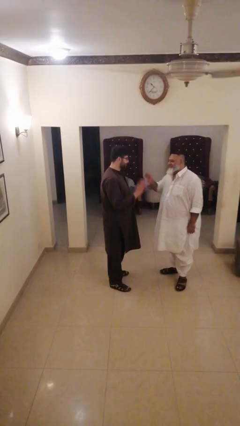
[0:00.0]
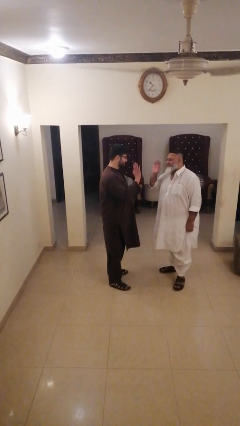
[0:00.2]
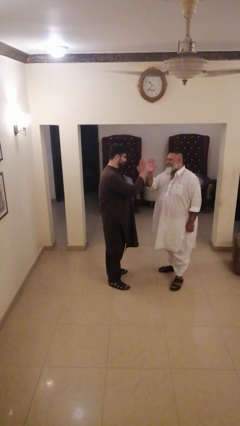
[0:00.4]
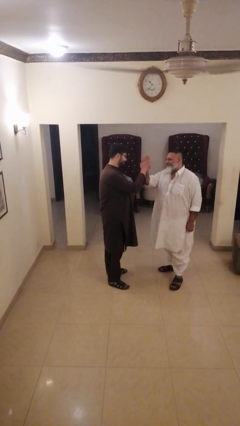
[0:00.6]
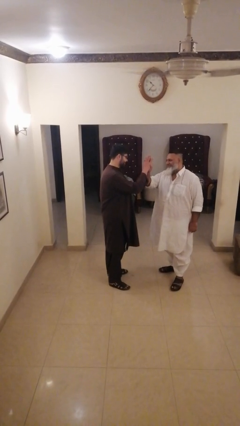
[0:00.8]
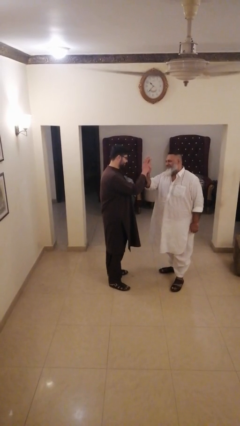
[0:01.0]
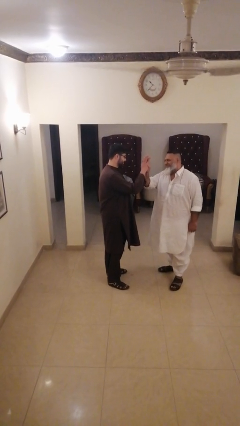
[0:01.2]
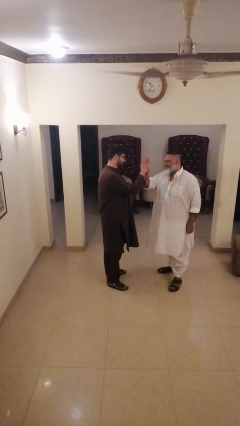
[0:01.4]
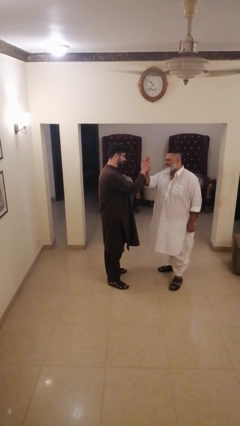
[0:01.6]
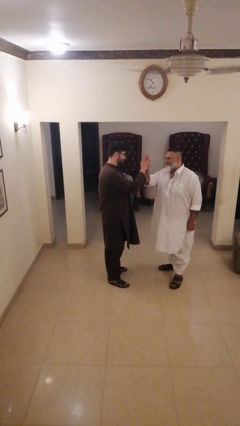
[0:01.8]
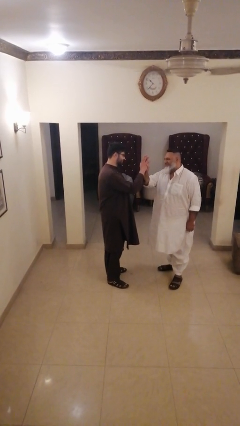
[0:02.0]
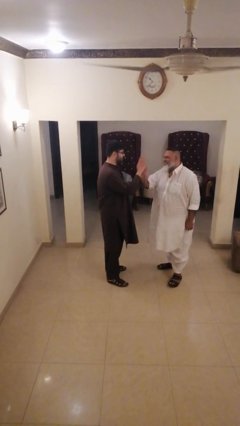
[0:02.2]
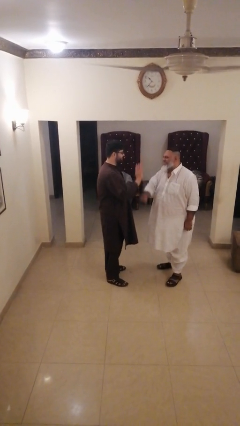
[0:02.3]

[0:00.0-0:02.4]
person highfives hand

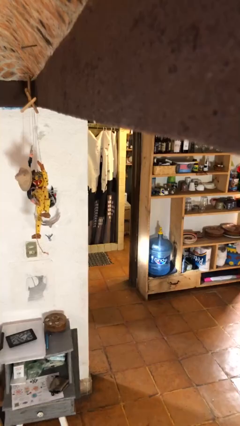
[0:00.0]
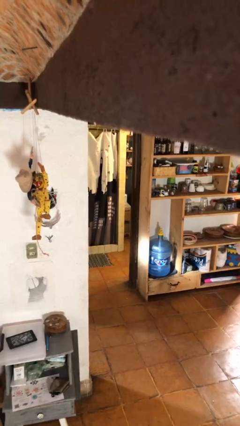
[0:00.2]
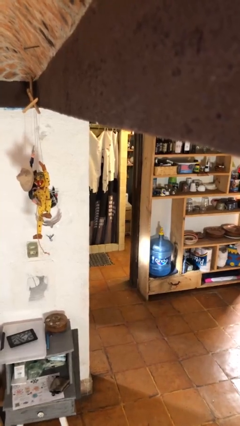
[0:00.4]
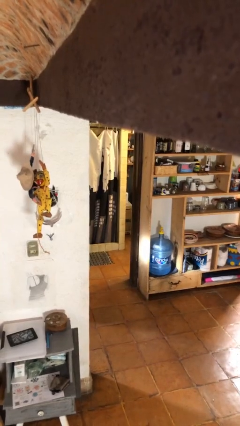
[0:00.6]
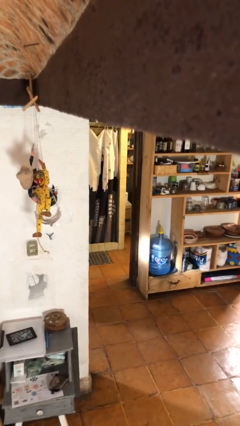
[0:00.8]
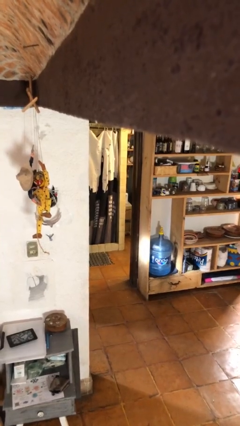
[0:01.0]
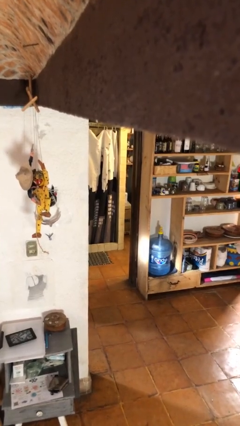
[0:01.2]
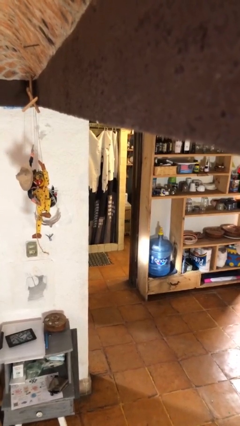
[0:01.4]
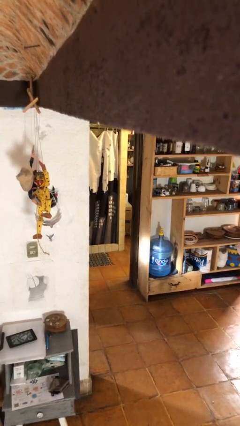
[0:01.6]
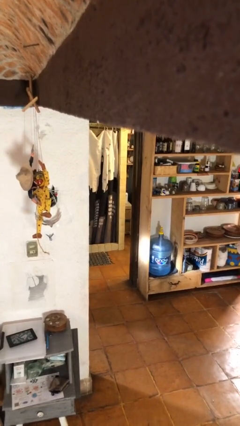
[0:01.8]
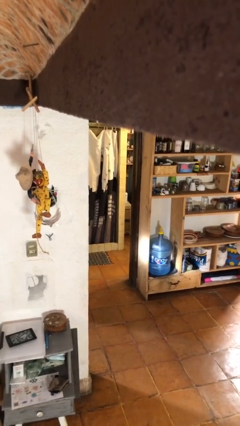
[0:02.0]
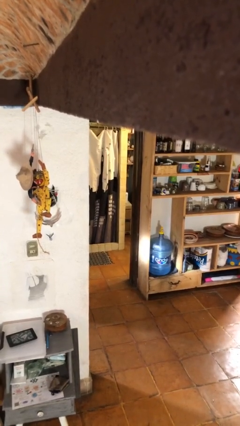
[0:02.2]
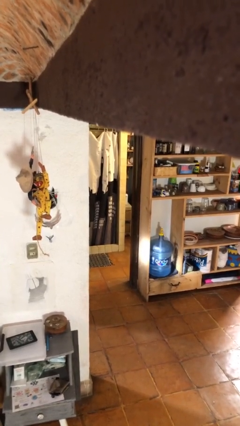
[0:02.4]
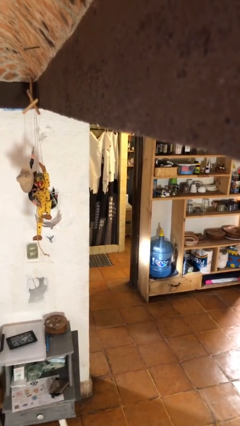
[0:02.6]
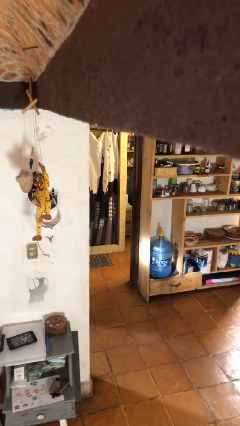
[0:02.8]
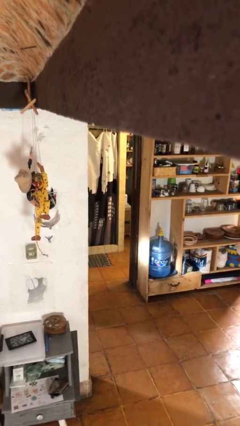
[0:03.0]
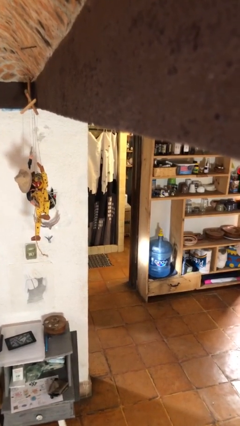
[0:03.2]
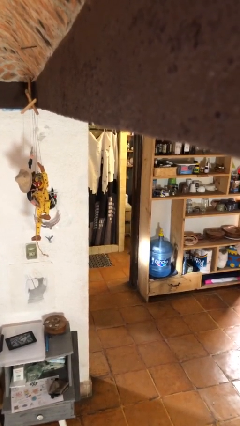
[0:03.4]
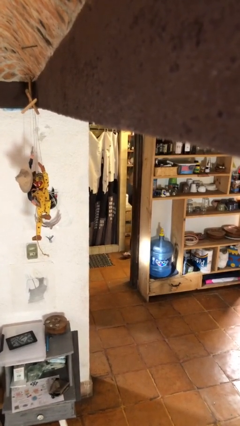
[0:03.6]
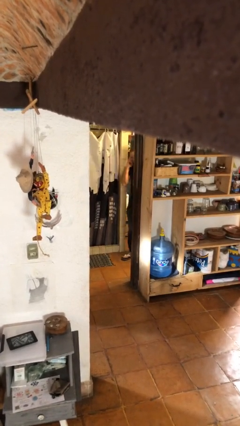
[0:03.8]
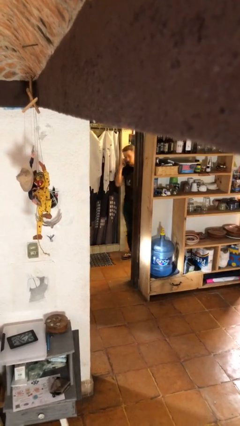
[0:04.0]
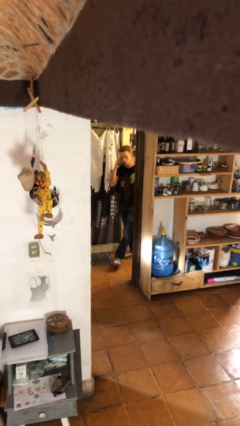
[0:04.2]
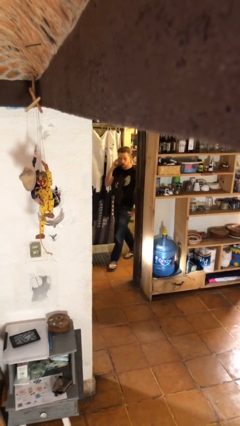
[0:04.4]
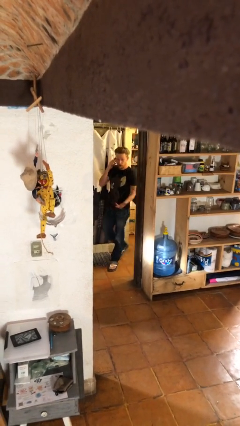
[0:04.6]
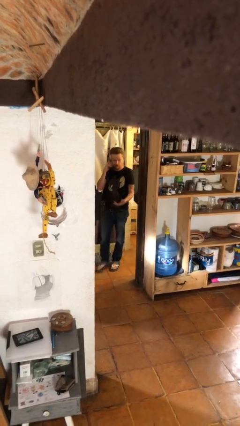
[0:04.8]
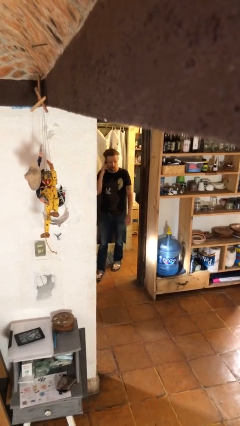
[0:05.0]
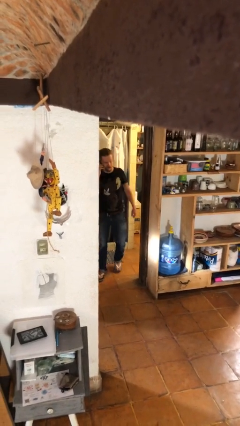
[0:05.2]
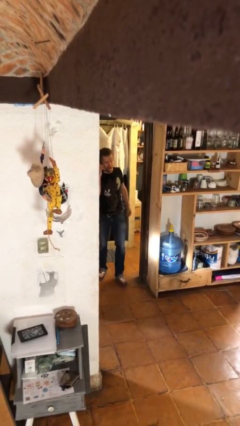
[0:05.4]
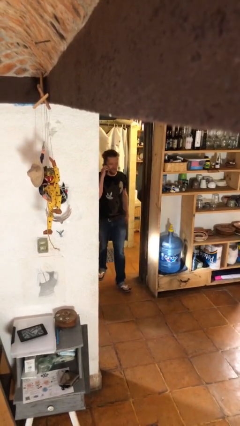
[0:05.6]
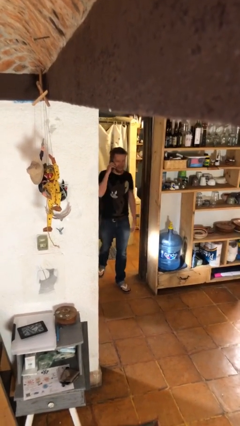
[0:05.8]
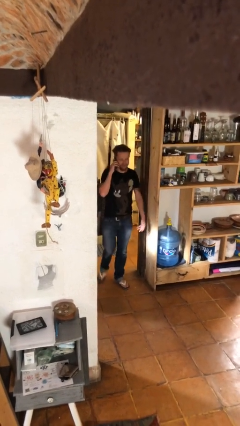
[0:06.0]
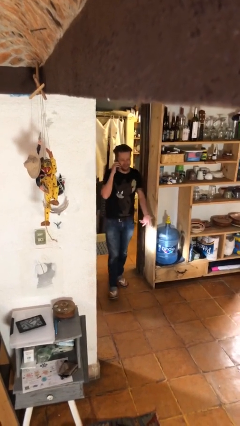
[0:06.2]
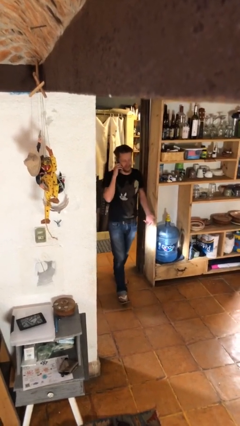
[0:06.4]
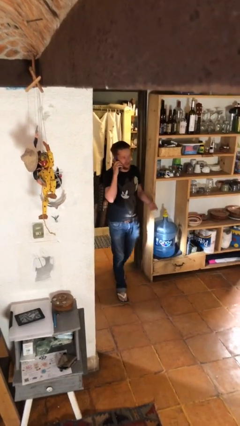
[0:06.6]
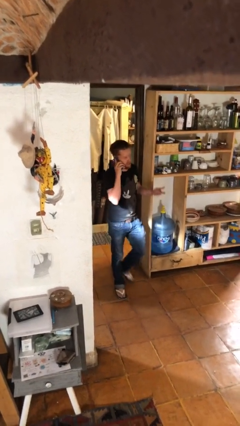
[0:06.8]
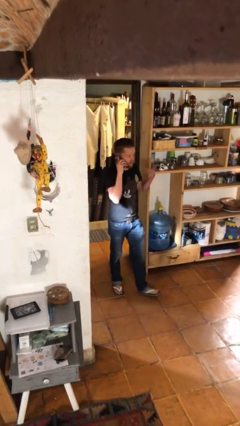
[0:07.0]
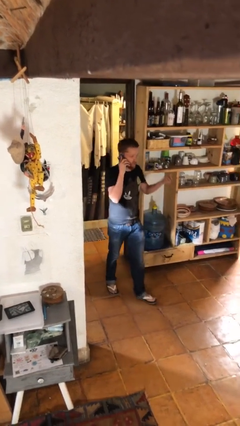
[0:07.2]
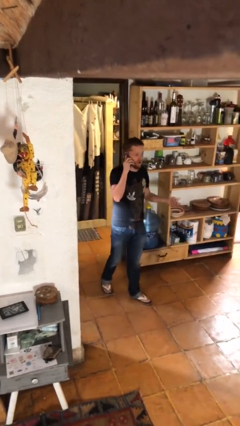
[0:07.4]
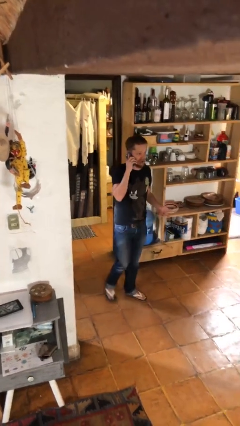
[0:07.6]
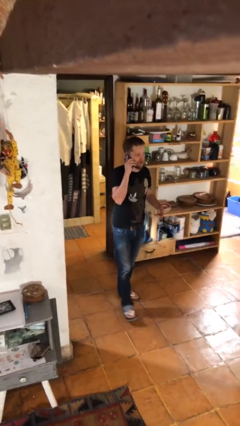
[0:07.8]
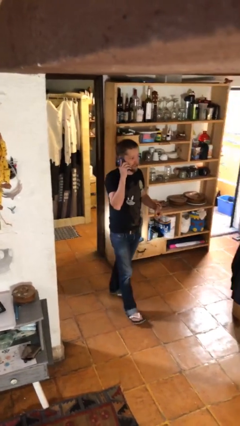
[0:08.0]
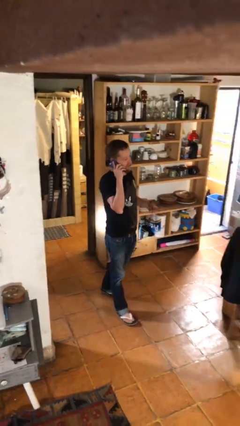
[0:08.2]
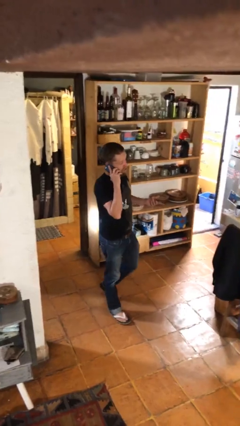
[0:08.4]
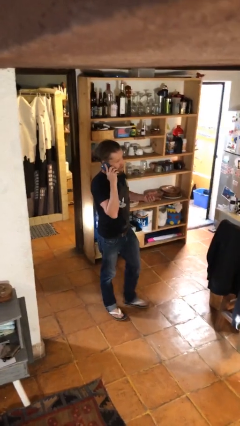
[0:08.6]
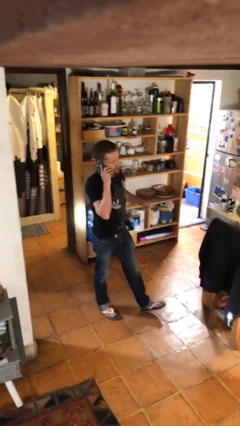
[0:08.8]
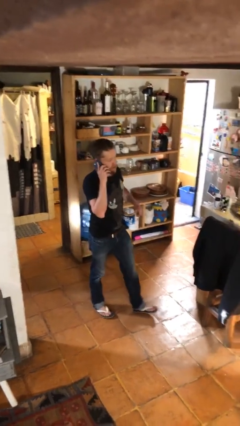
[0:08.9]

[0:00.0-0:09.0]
person enters scene through structure

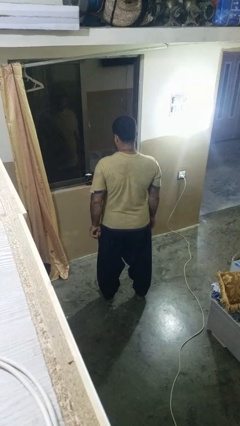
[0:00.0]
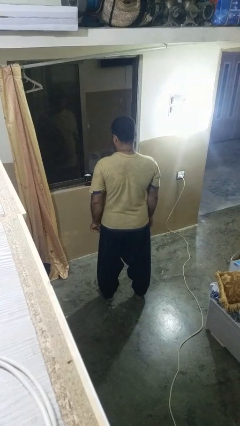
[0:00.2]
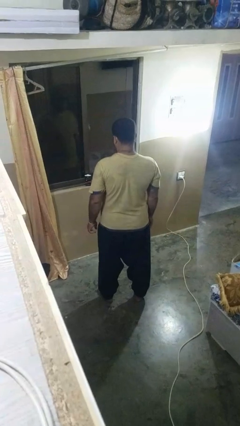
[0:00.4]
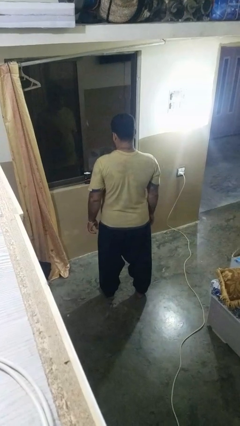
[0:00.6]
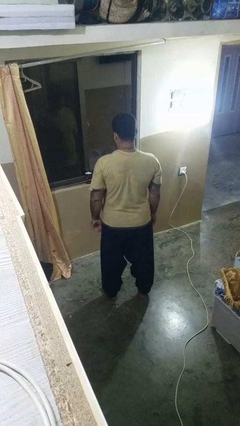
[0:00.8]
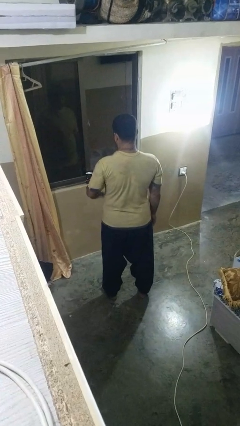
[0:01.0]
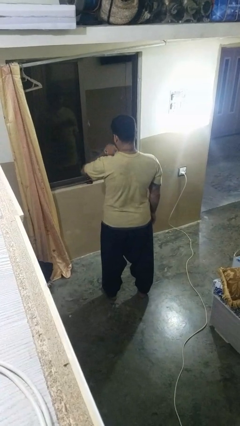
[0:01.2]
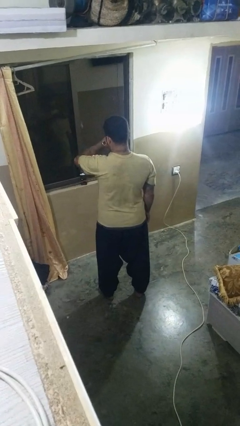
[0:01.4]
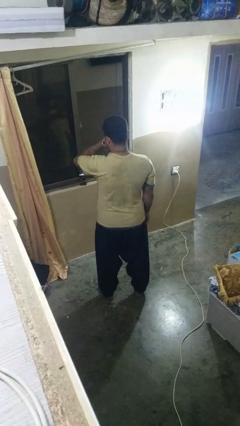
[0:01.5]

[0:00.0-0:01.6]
person looks at wristwatch

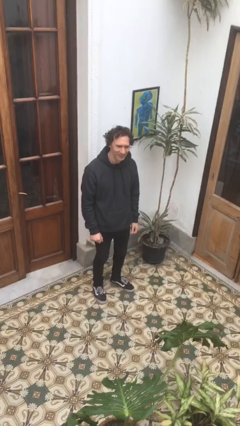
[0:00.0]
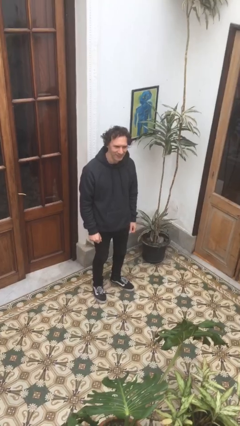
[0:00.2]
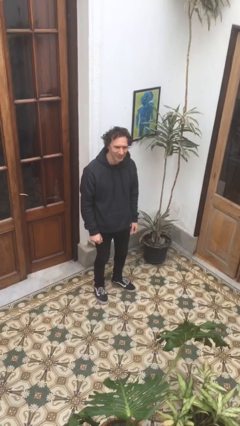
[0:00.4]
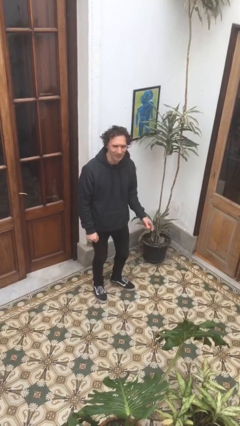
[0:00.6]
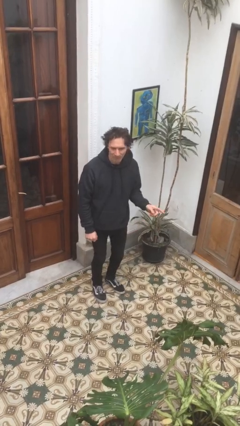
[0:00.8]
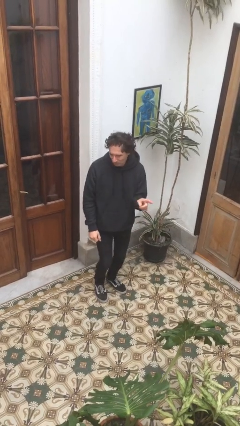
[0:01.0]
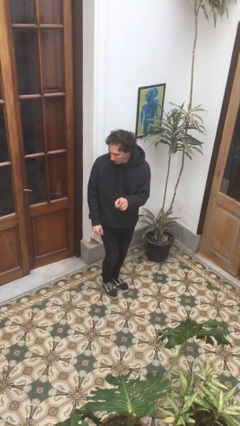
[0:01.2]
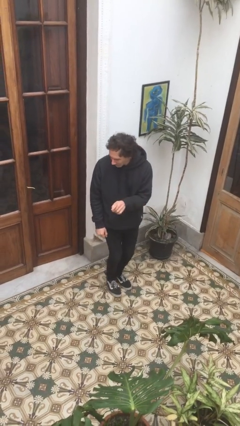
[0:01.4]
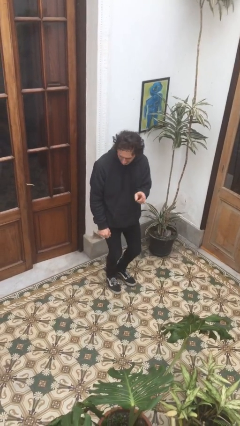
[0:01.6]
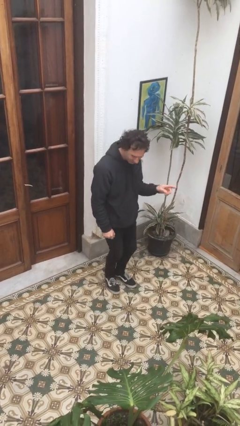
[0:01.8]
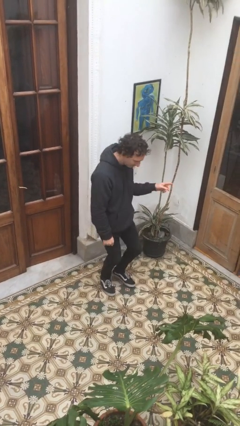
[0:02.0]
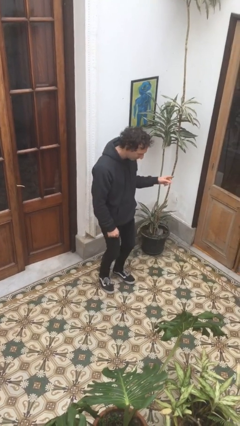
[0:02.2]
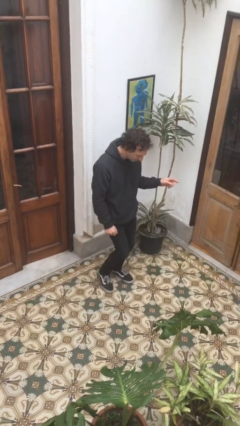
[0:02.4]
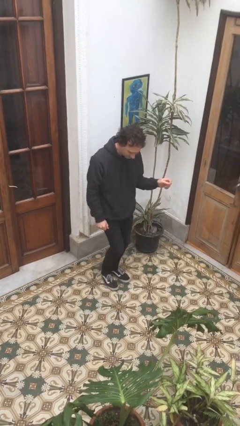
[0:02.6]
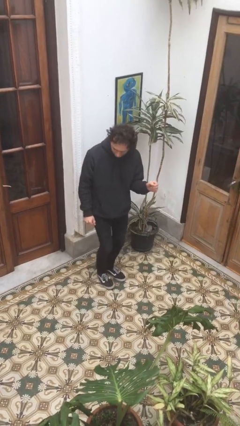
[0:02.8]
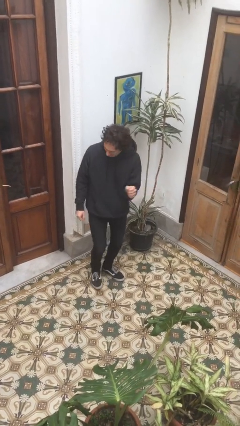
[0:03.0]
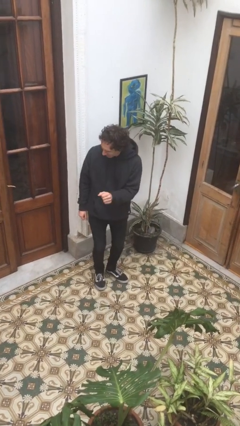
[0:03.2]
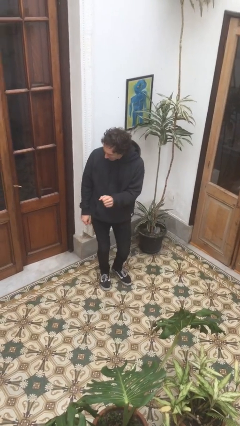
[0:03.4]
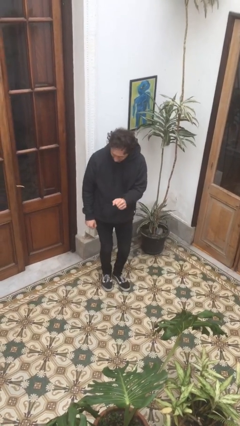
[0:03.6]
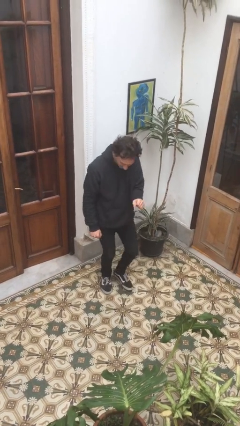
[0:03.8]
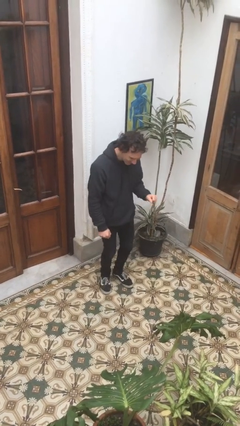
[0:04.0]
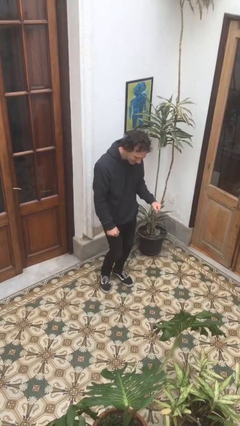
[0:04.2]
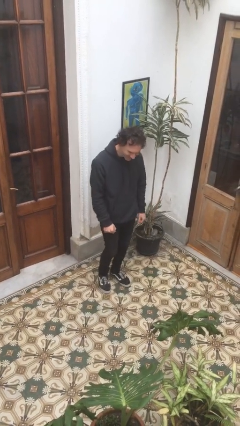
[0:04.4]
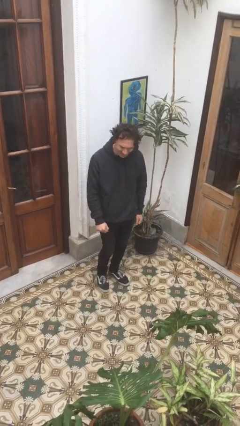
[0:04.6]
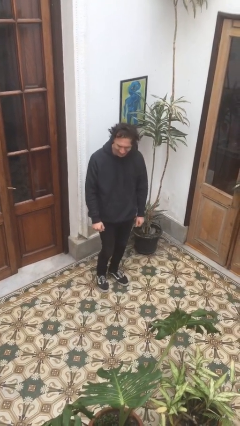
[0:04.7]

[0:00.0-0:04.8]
person dances in place

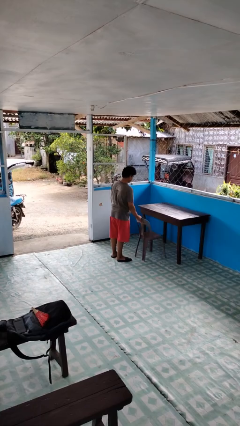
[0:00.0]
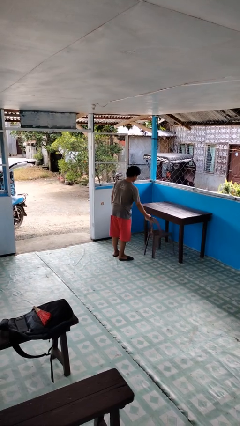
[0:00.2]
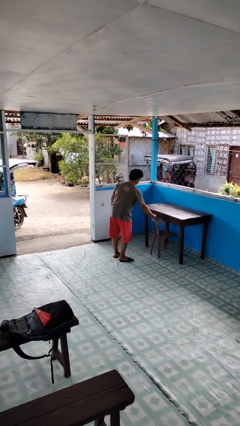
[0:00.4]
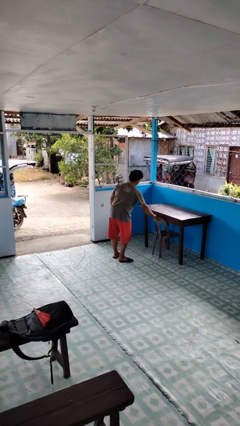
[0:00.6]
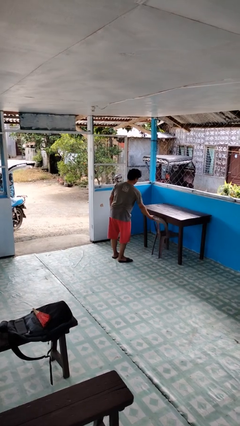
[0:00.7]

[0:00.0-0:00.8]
person pushes in chair
